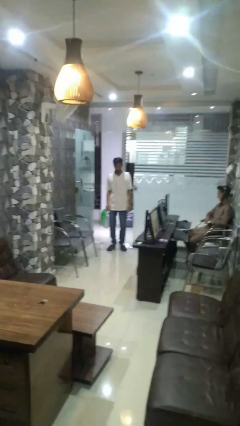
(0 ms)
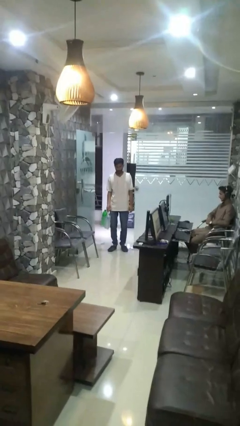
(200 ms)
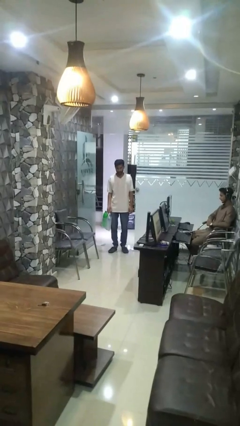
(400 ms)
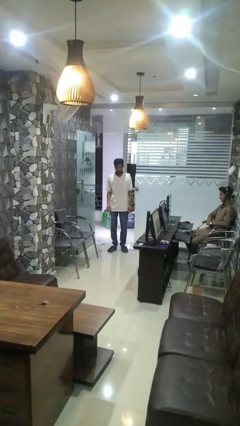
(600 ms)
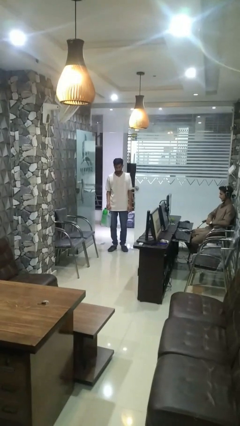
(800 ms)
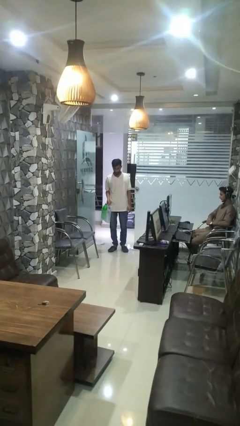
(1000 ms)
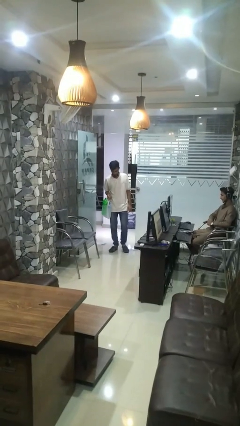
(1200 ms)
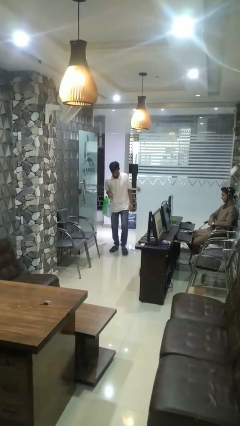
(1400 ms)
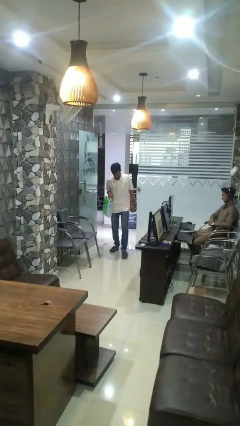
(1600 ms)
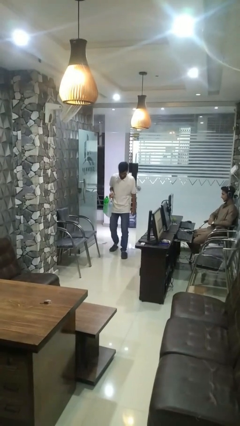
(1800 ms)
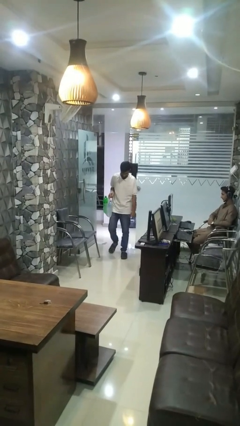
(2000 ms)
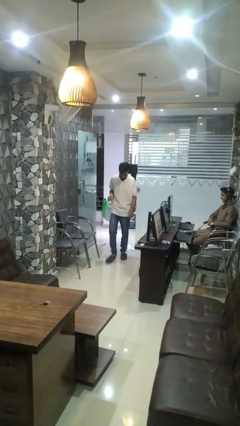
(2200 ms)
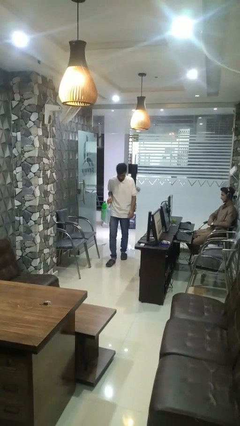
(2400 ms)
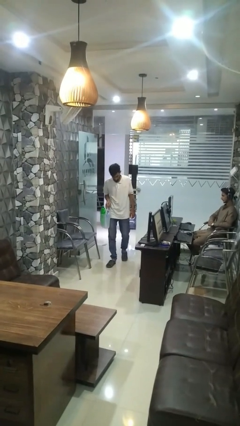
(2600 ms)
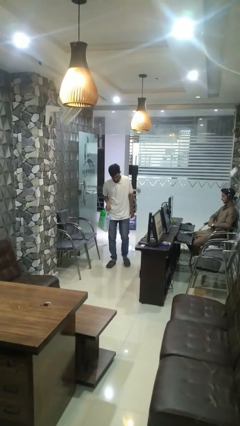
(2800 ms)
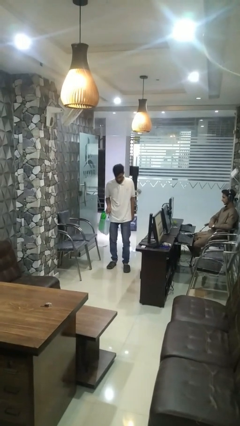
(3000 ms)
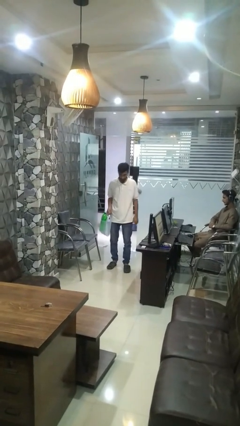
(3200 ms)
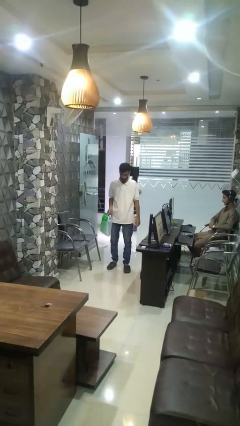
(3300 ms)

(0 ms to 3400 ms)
person carries groceries

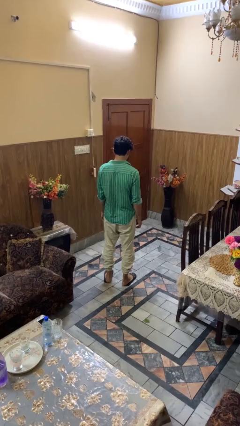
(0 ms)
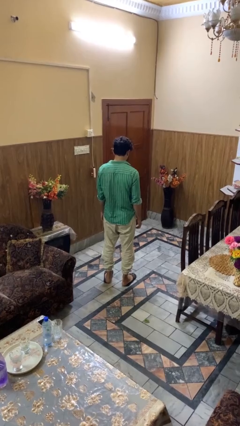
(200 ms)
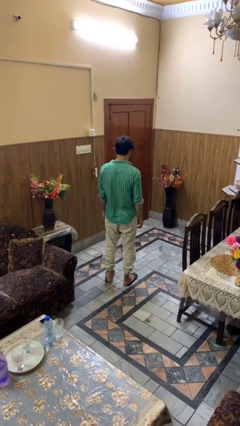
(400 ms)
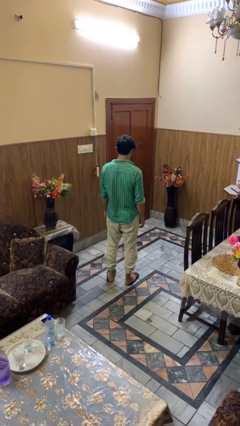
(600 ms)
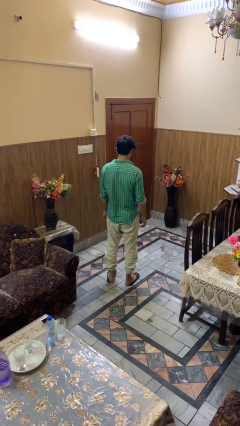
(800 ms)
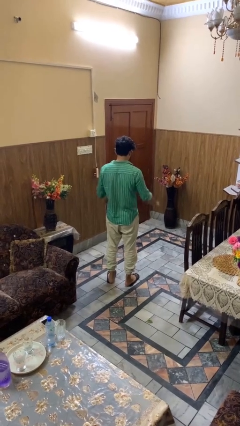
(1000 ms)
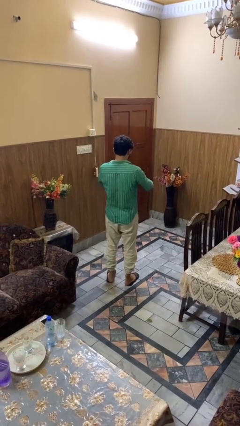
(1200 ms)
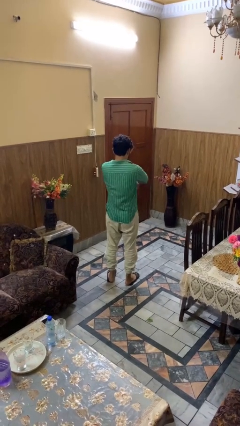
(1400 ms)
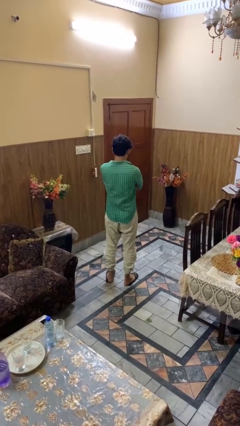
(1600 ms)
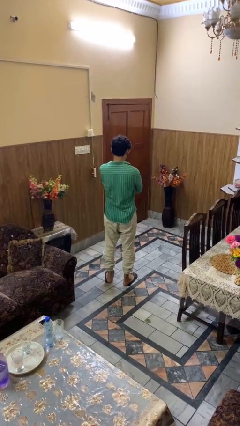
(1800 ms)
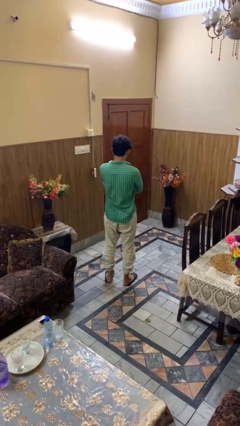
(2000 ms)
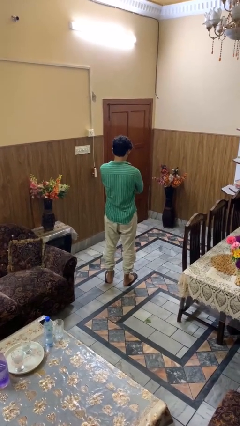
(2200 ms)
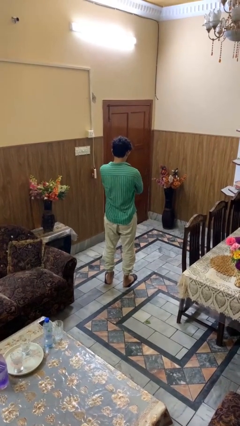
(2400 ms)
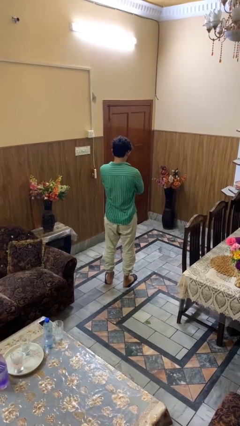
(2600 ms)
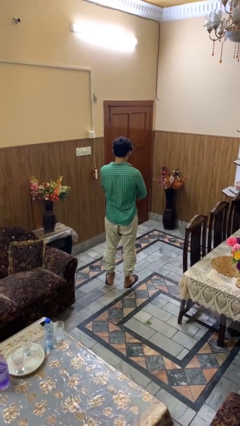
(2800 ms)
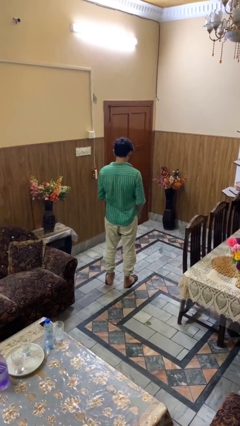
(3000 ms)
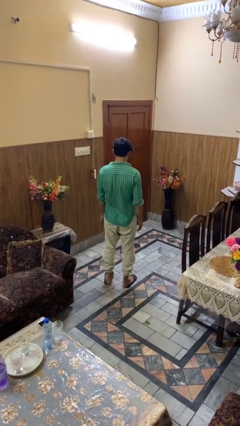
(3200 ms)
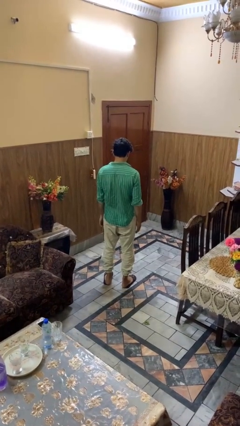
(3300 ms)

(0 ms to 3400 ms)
person crosses arms

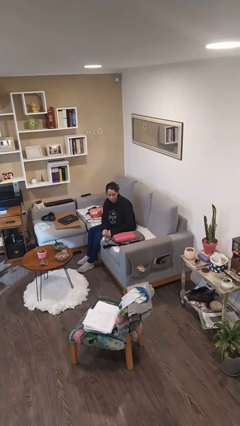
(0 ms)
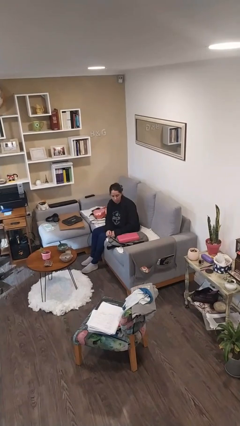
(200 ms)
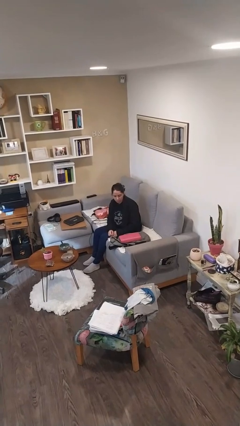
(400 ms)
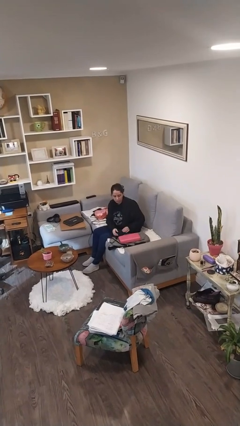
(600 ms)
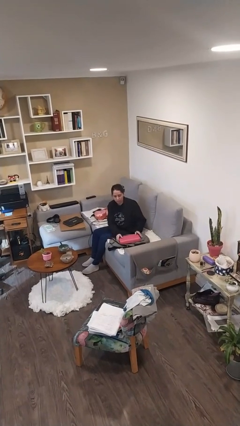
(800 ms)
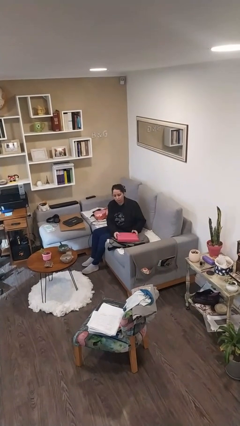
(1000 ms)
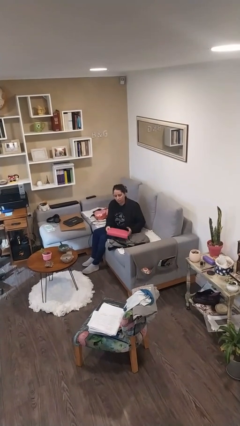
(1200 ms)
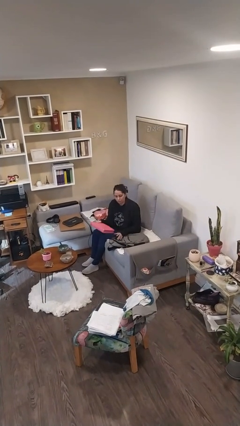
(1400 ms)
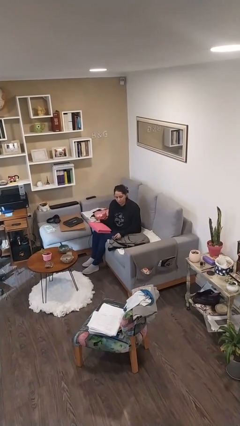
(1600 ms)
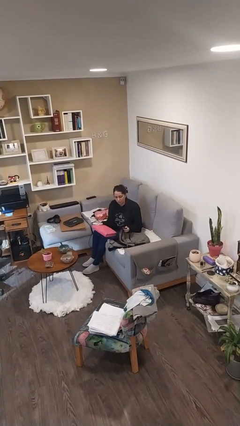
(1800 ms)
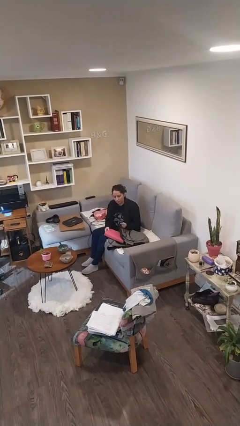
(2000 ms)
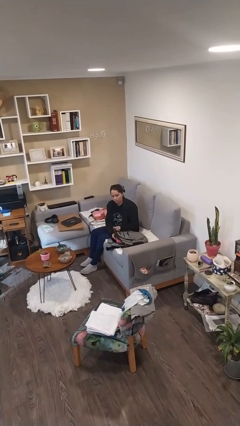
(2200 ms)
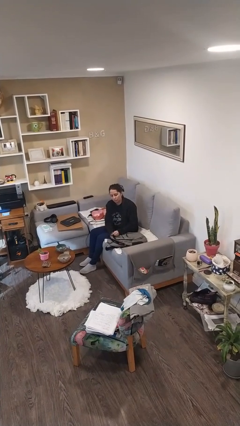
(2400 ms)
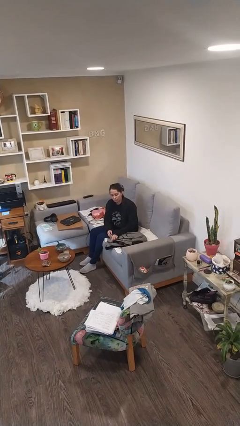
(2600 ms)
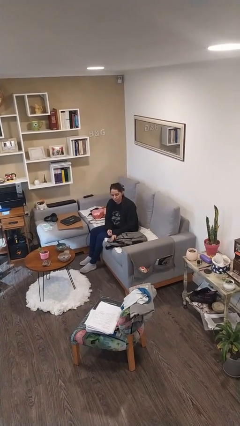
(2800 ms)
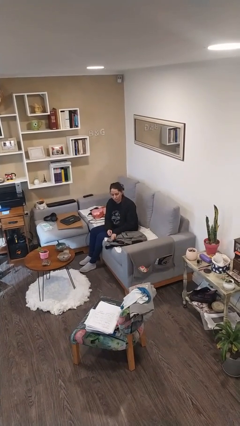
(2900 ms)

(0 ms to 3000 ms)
person puts object into backpack

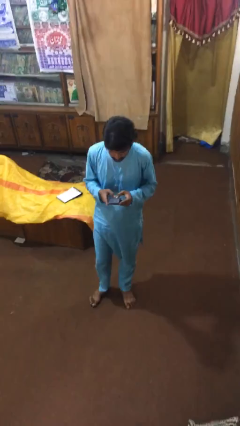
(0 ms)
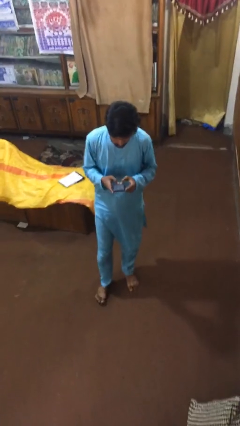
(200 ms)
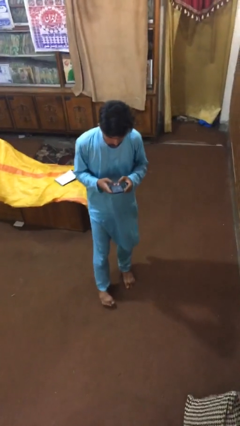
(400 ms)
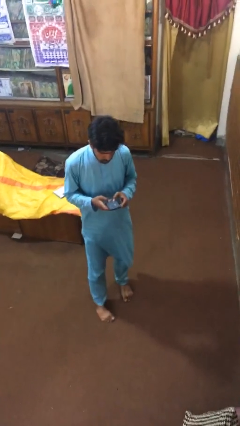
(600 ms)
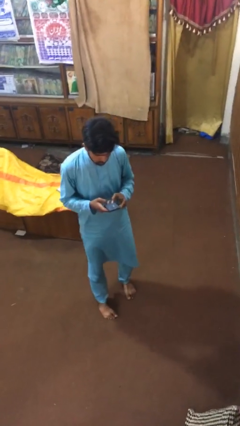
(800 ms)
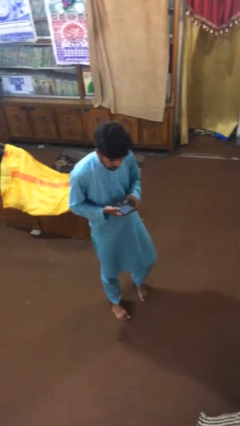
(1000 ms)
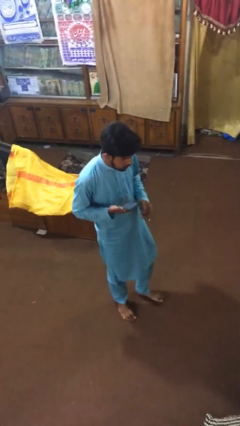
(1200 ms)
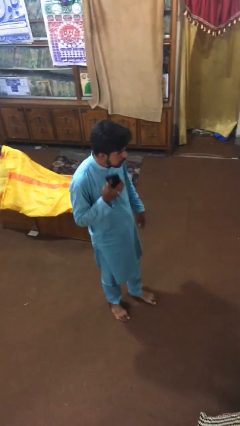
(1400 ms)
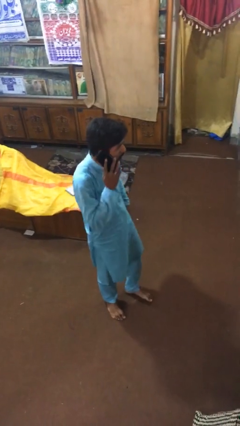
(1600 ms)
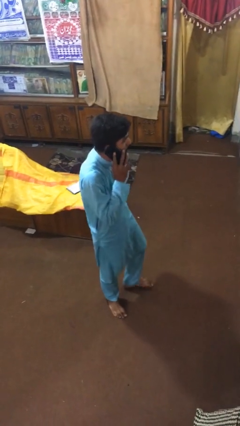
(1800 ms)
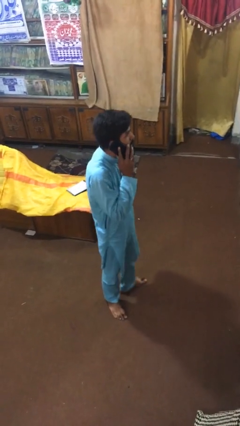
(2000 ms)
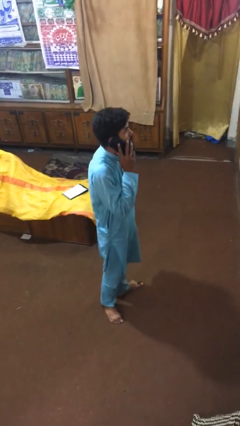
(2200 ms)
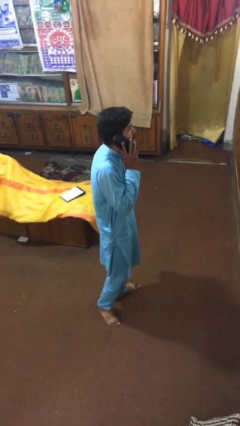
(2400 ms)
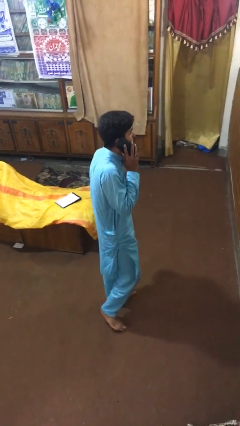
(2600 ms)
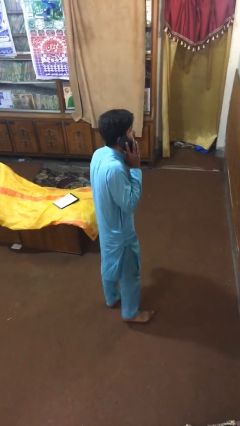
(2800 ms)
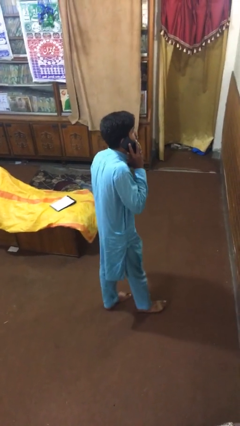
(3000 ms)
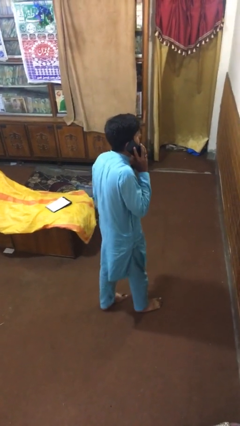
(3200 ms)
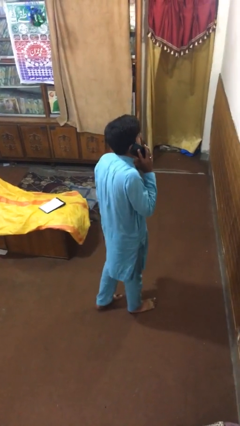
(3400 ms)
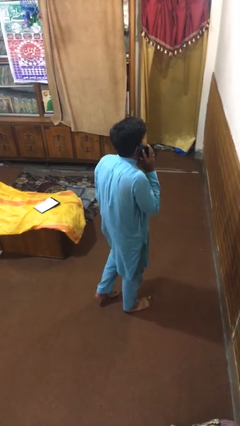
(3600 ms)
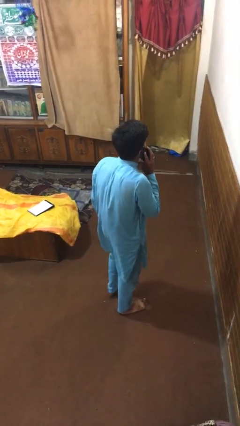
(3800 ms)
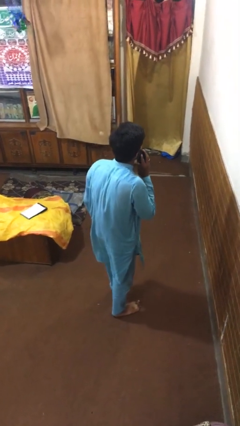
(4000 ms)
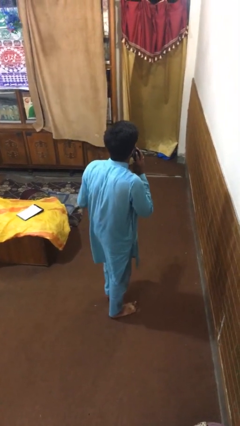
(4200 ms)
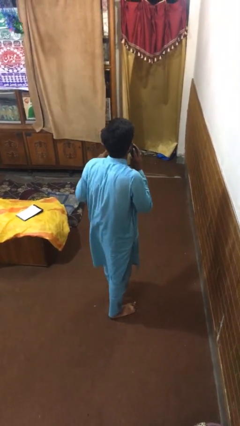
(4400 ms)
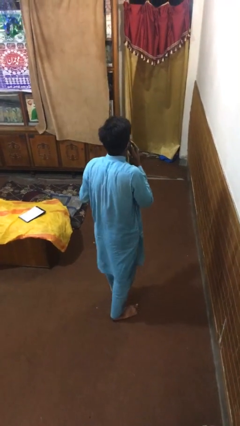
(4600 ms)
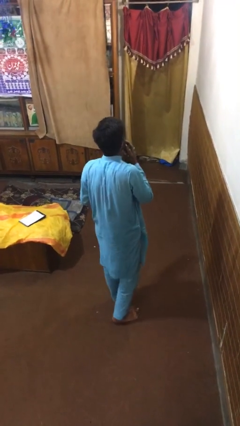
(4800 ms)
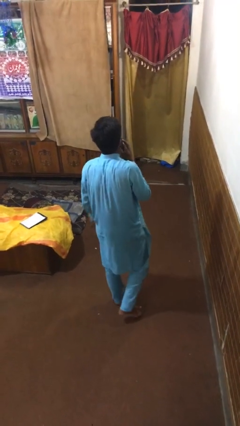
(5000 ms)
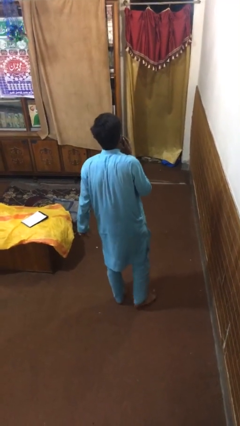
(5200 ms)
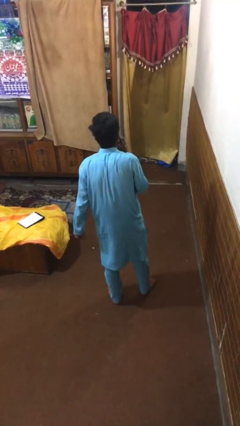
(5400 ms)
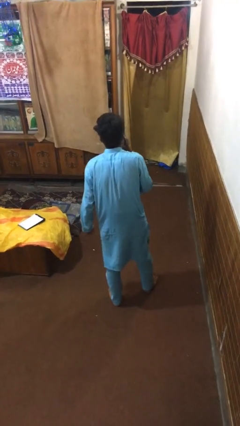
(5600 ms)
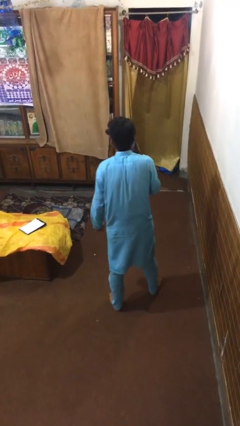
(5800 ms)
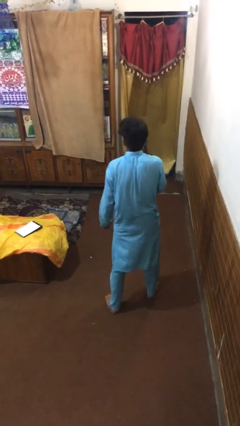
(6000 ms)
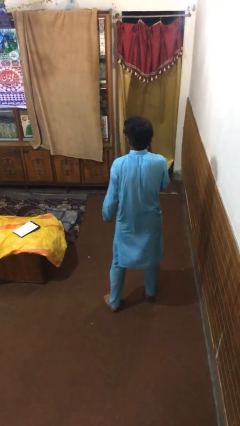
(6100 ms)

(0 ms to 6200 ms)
person talks on phone

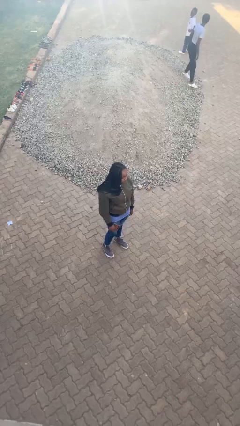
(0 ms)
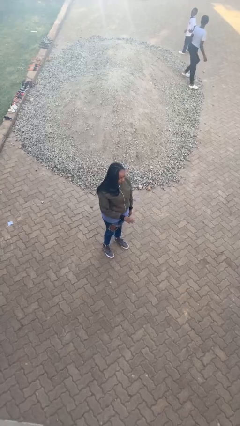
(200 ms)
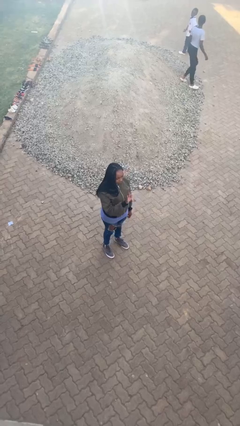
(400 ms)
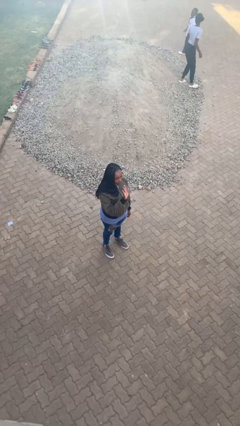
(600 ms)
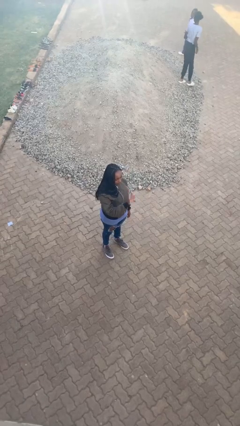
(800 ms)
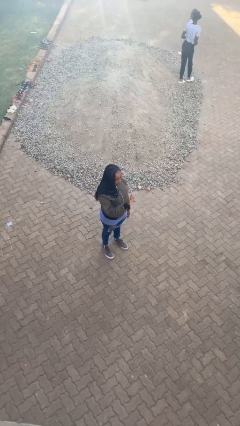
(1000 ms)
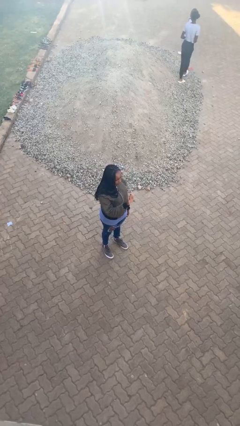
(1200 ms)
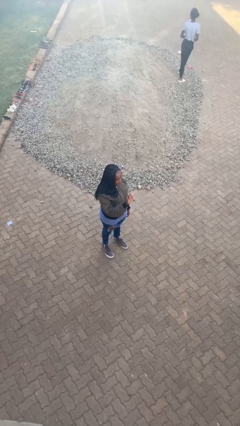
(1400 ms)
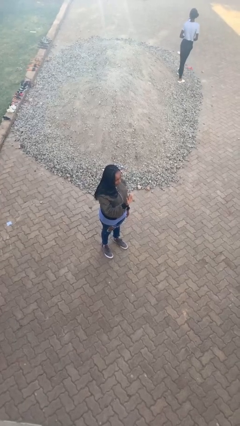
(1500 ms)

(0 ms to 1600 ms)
person gestures stop
